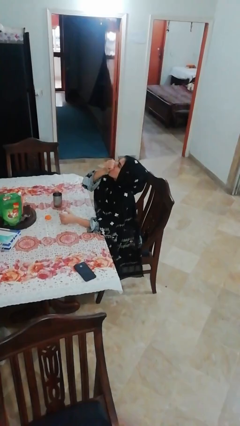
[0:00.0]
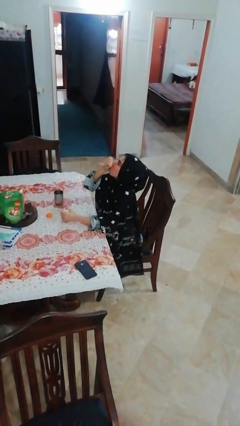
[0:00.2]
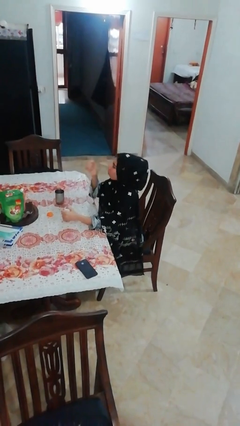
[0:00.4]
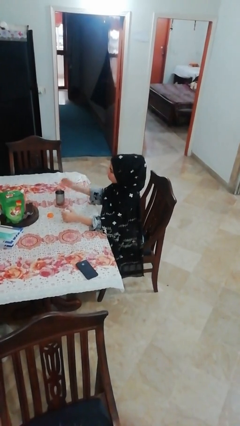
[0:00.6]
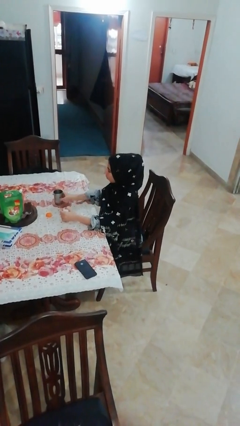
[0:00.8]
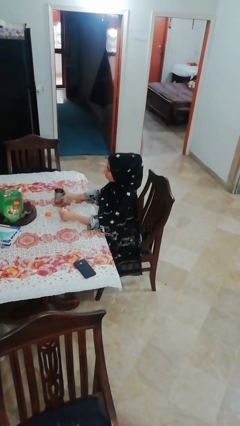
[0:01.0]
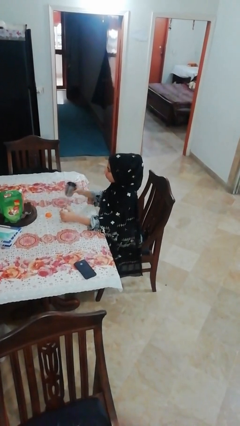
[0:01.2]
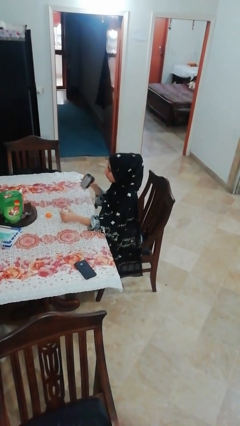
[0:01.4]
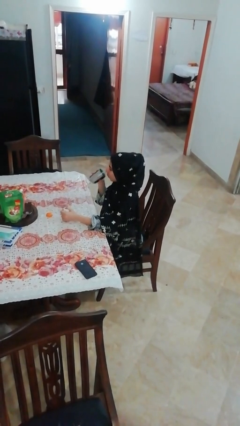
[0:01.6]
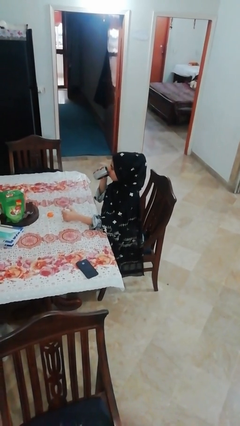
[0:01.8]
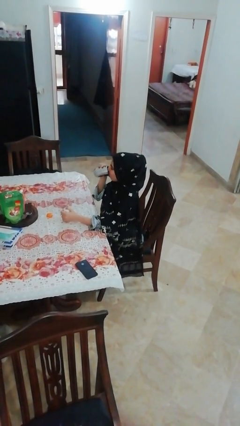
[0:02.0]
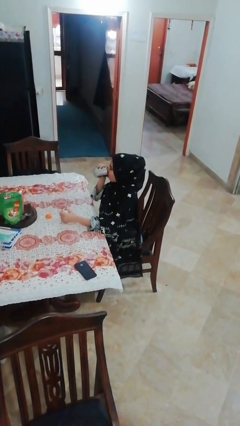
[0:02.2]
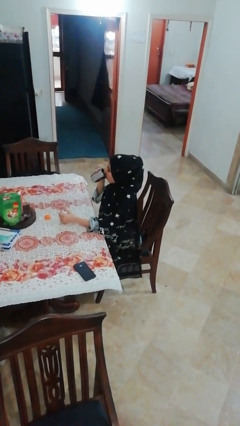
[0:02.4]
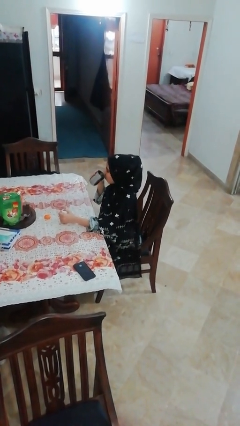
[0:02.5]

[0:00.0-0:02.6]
person drinks from cup

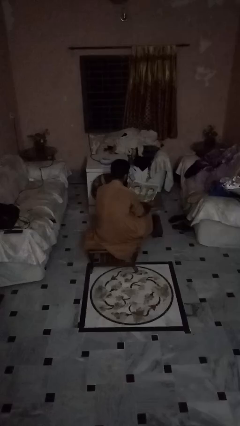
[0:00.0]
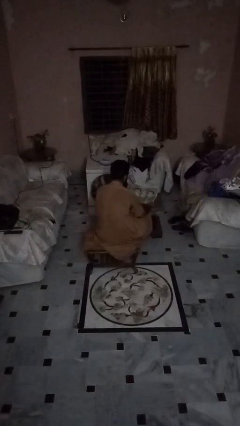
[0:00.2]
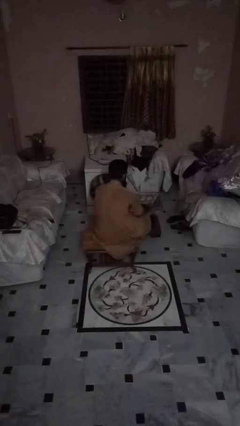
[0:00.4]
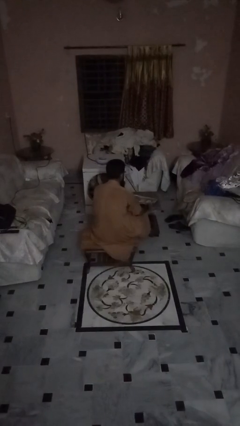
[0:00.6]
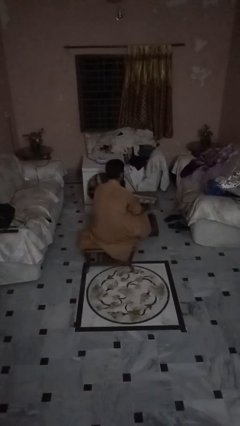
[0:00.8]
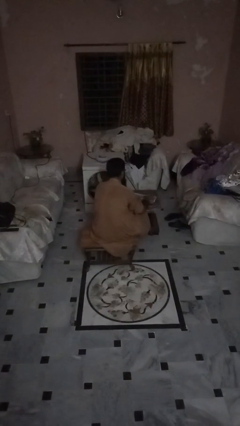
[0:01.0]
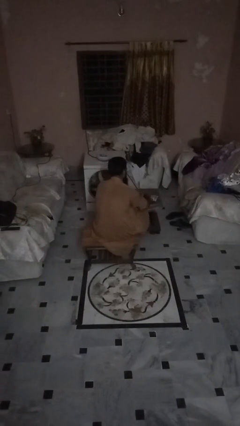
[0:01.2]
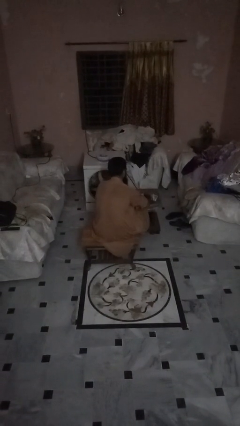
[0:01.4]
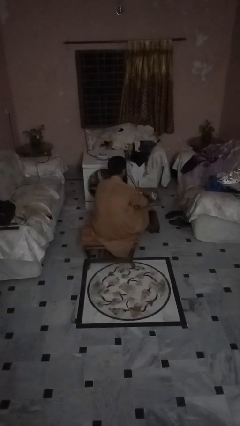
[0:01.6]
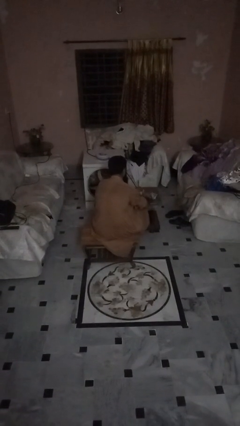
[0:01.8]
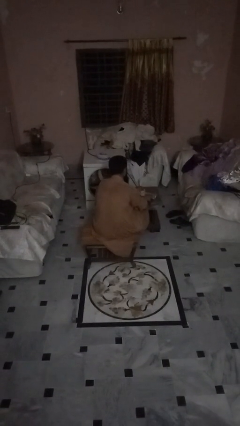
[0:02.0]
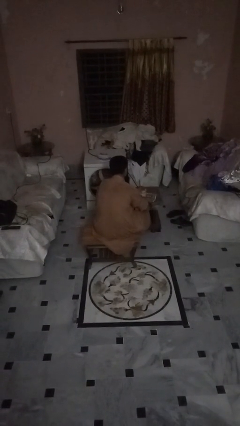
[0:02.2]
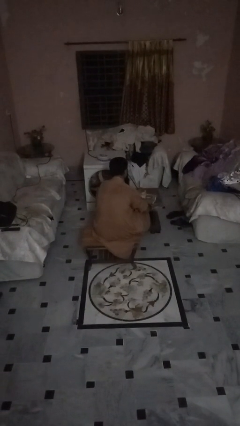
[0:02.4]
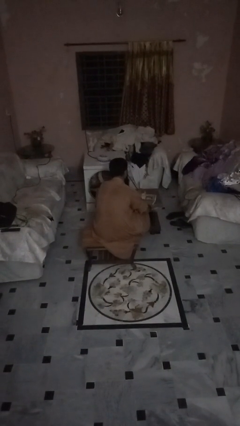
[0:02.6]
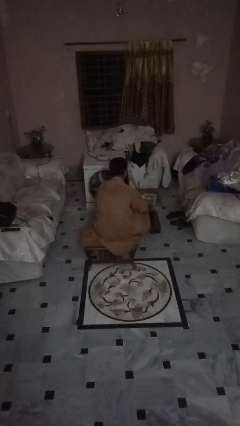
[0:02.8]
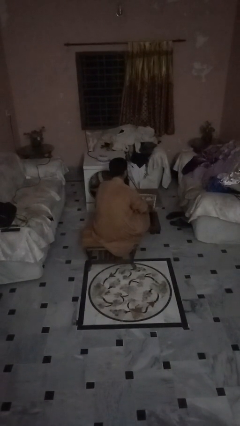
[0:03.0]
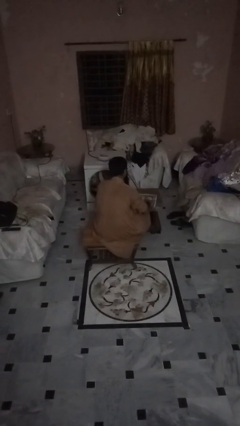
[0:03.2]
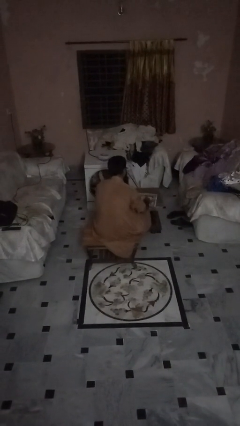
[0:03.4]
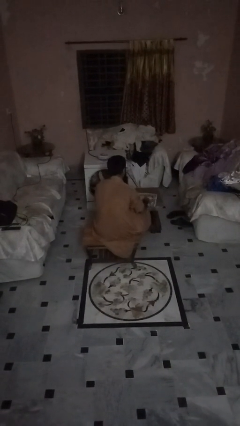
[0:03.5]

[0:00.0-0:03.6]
person tears paper

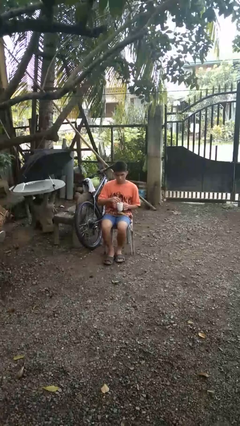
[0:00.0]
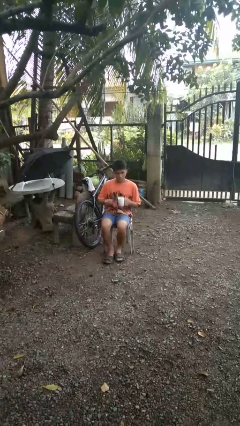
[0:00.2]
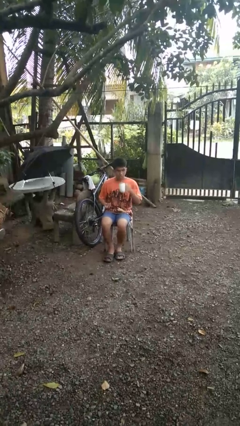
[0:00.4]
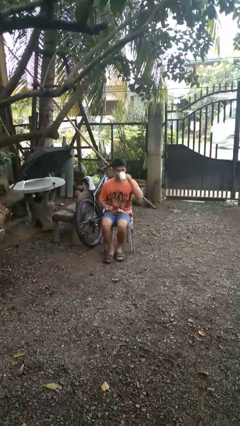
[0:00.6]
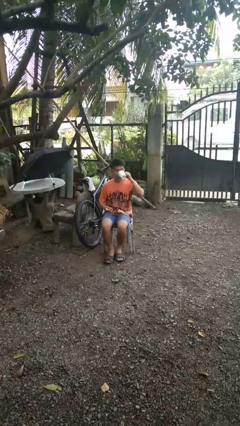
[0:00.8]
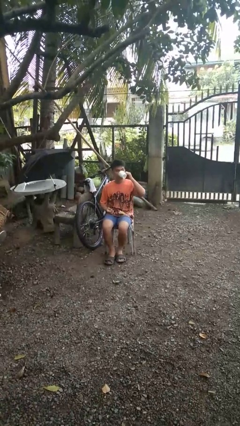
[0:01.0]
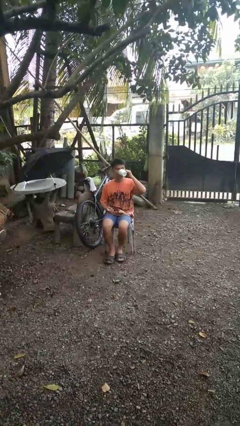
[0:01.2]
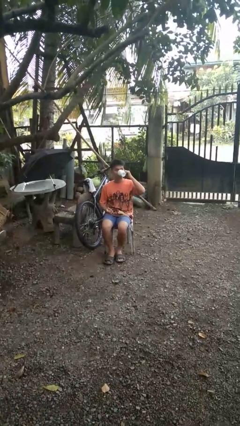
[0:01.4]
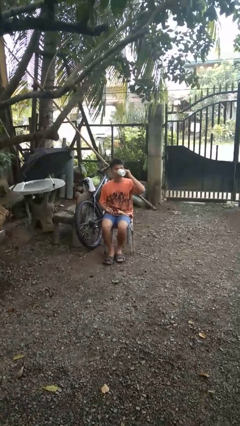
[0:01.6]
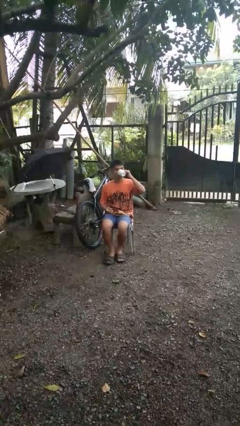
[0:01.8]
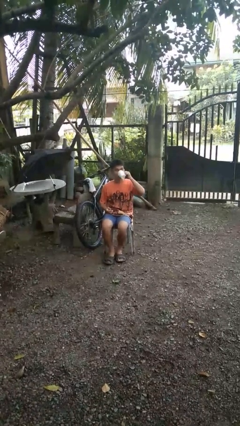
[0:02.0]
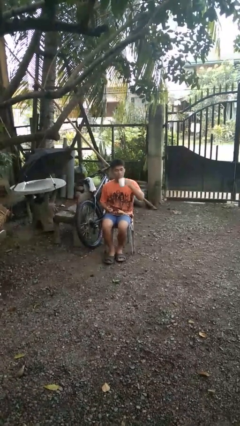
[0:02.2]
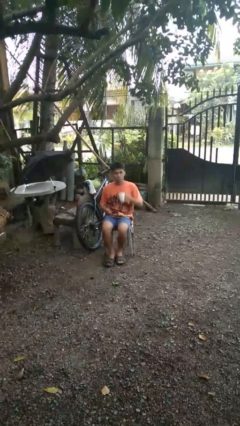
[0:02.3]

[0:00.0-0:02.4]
person drinks from mug

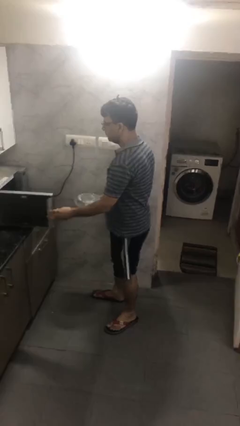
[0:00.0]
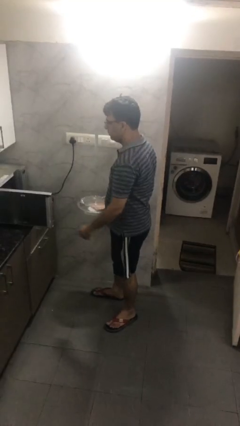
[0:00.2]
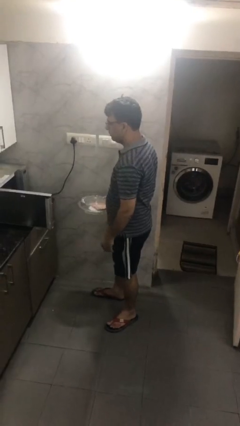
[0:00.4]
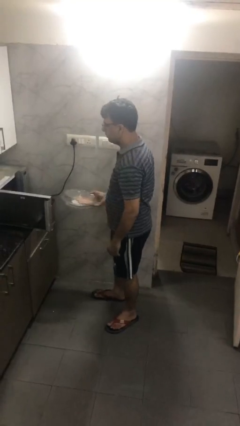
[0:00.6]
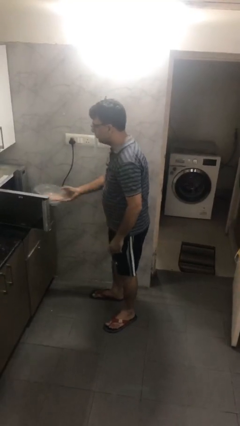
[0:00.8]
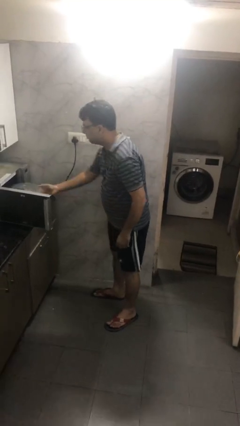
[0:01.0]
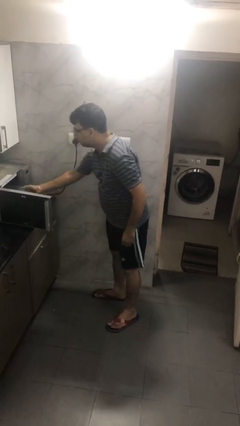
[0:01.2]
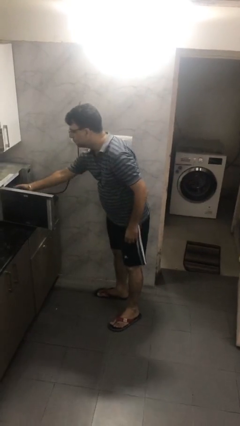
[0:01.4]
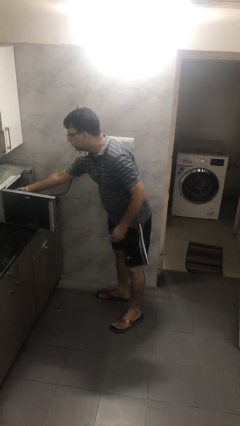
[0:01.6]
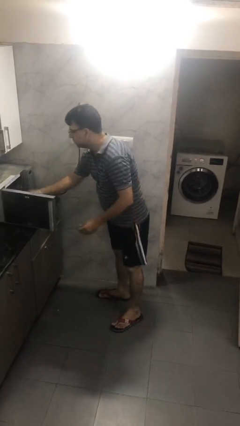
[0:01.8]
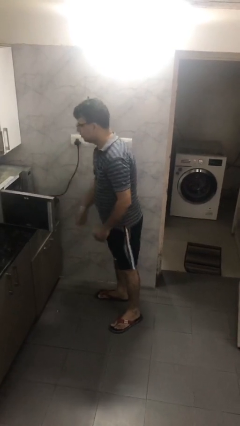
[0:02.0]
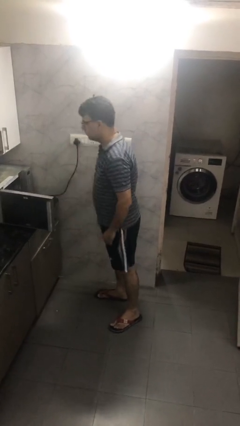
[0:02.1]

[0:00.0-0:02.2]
person puts object into microwave

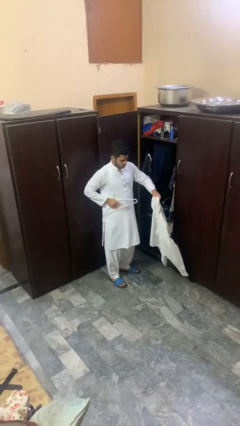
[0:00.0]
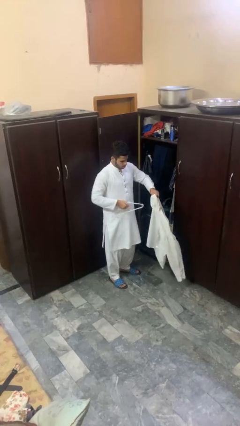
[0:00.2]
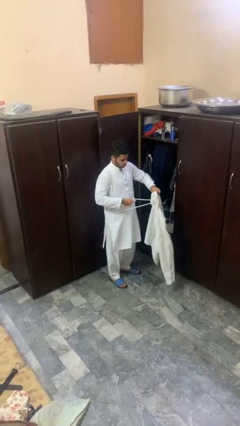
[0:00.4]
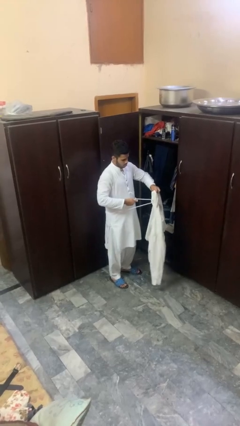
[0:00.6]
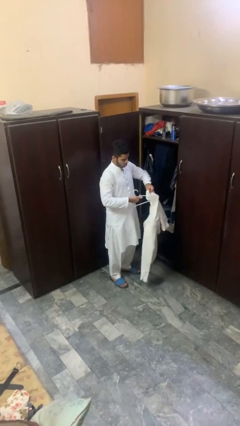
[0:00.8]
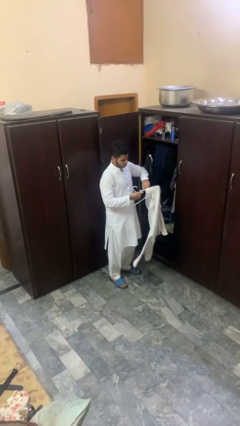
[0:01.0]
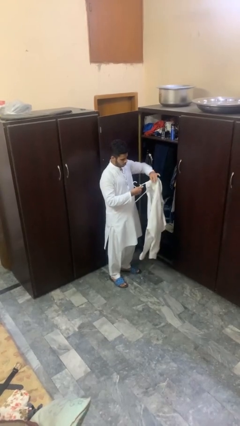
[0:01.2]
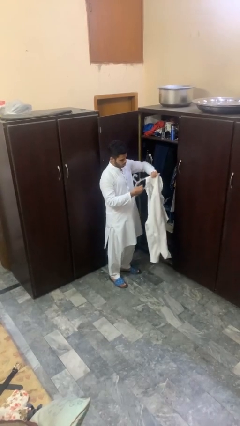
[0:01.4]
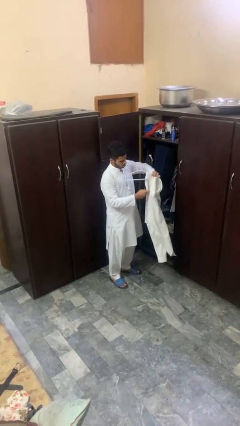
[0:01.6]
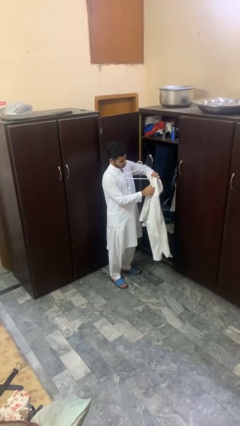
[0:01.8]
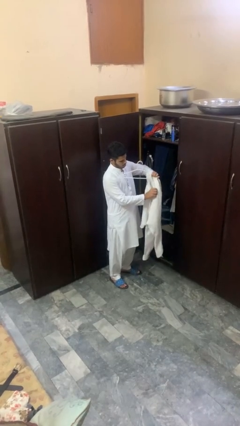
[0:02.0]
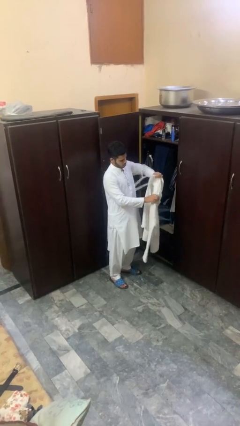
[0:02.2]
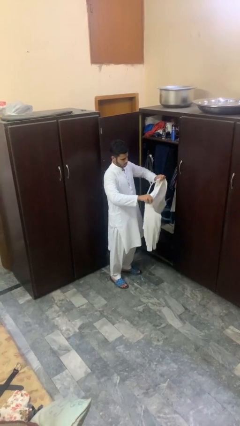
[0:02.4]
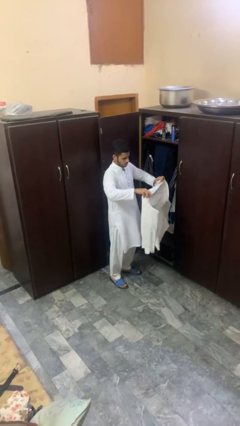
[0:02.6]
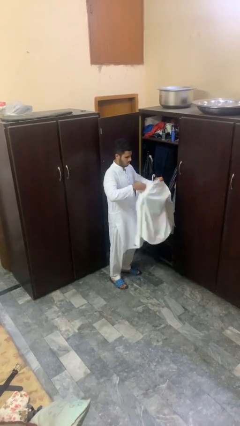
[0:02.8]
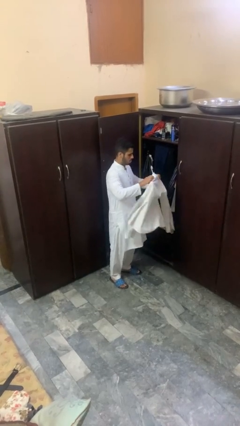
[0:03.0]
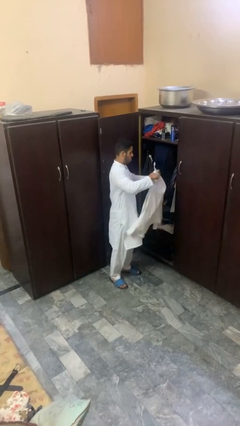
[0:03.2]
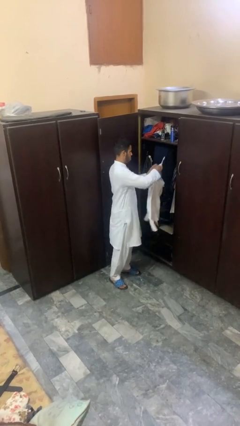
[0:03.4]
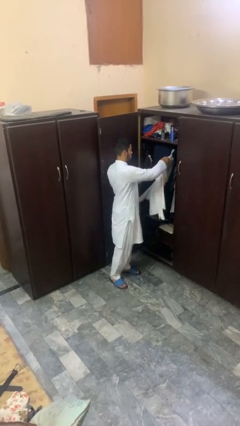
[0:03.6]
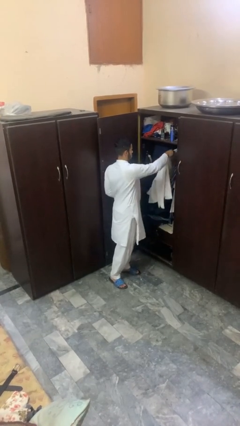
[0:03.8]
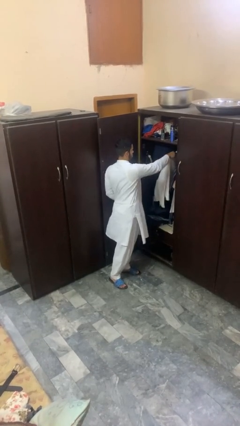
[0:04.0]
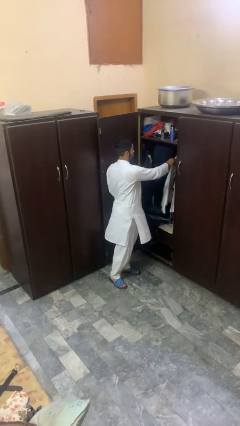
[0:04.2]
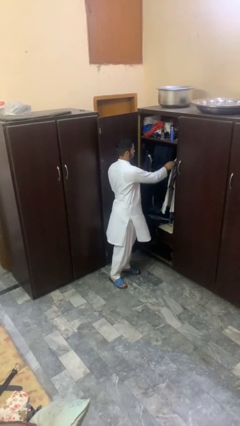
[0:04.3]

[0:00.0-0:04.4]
person puts clothes into closet

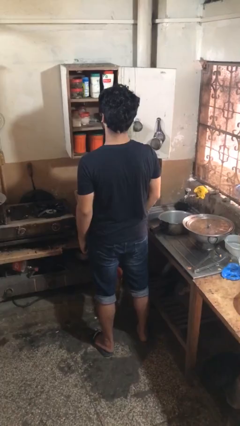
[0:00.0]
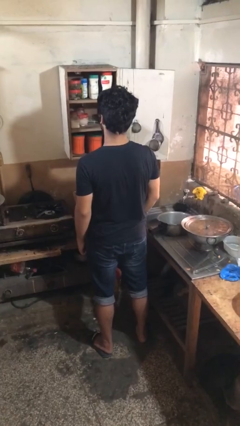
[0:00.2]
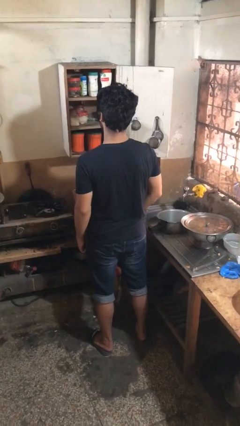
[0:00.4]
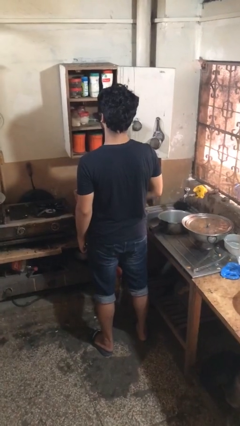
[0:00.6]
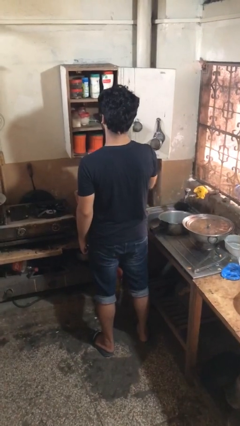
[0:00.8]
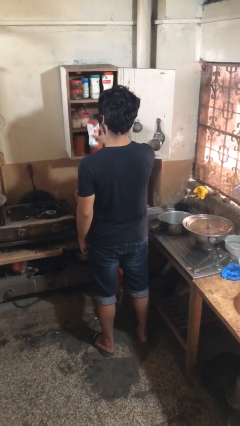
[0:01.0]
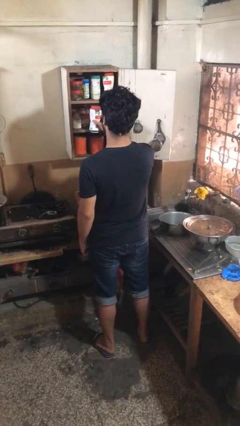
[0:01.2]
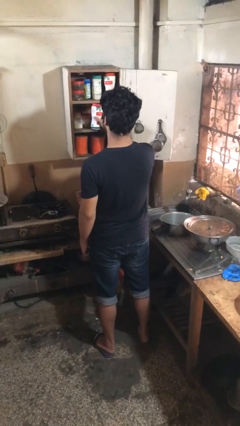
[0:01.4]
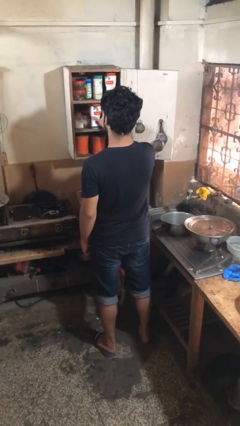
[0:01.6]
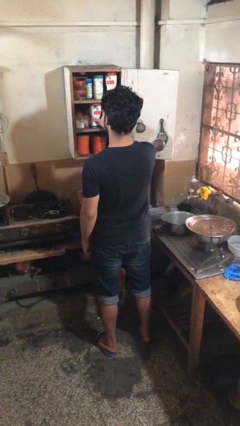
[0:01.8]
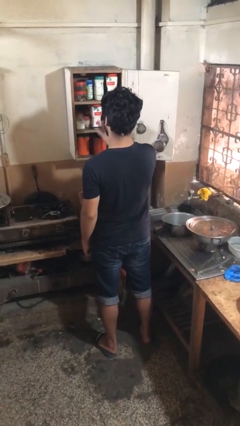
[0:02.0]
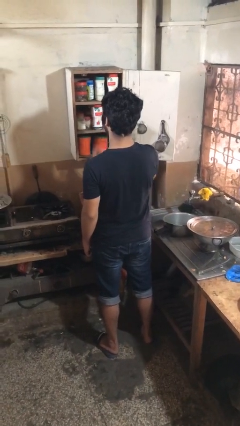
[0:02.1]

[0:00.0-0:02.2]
person puts down object into cabinet
